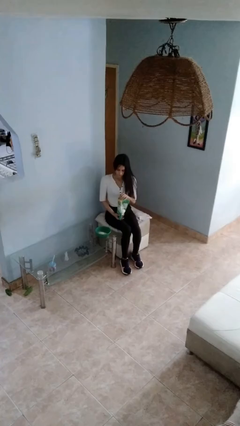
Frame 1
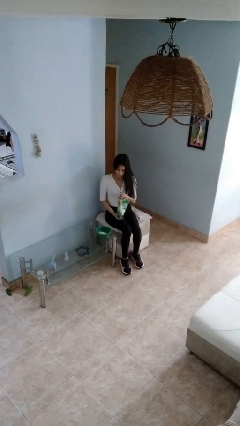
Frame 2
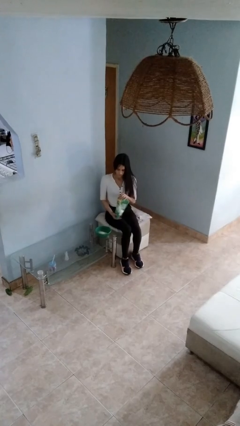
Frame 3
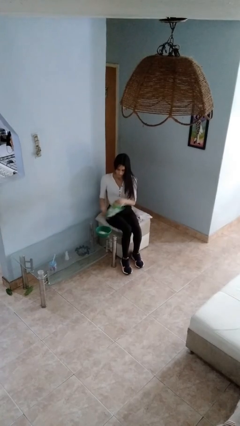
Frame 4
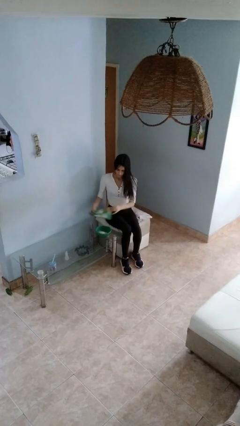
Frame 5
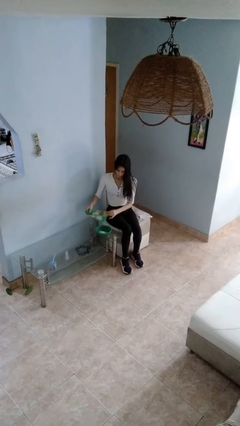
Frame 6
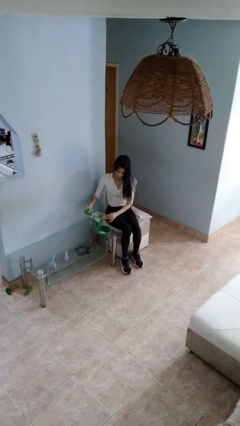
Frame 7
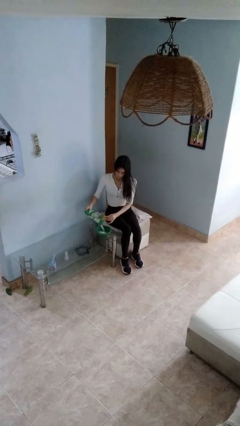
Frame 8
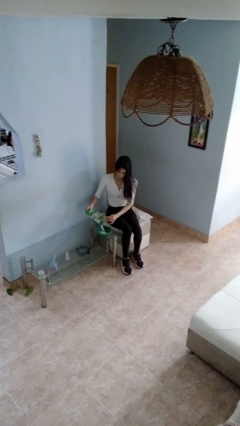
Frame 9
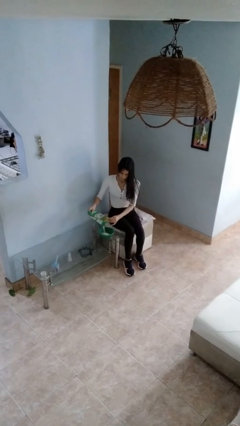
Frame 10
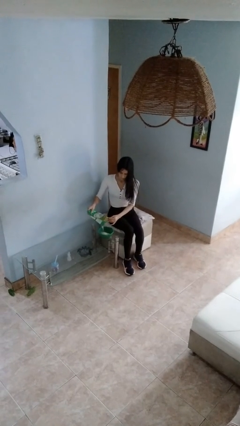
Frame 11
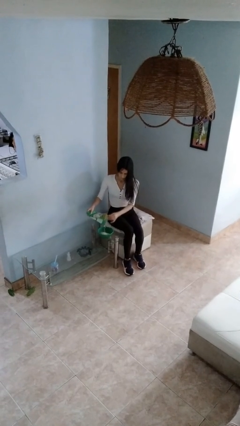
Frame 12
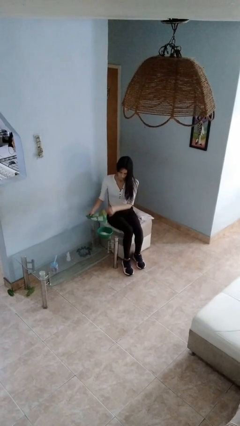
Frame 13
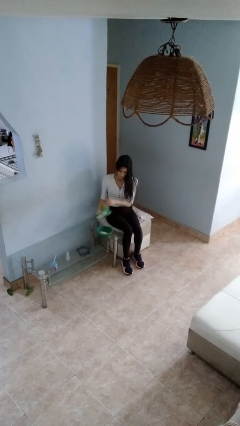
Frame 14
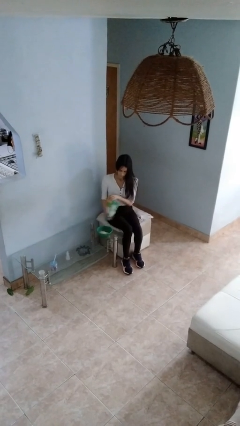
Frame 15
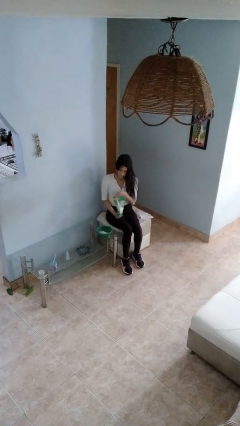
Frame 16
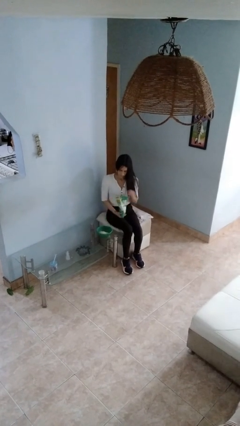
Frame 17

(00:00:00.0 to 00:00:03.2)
person pours into bowl

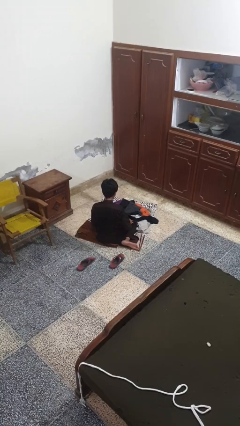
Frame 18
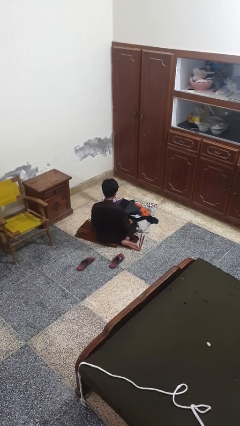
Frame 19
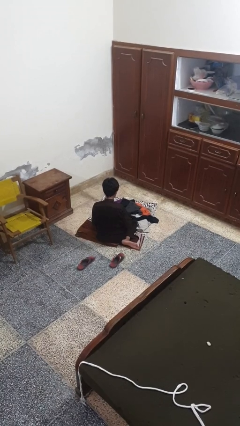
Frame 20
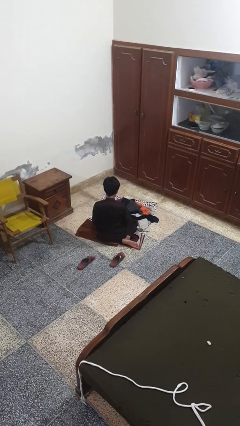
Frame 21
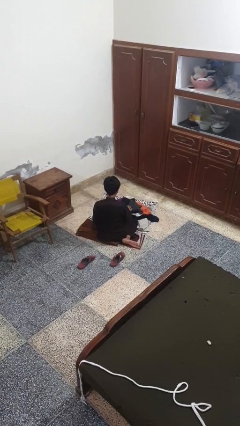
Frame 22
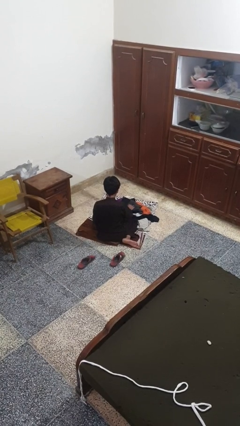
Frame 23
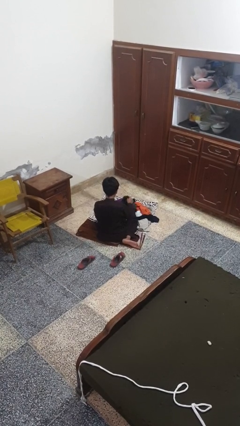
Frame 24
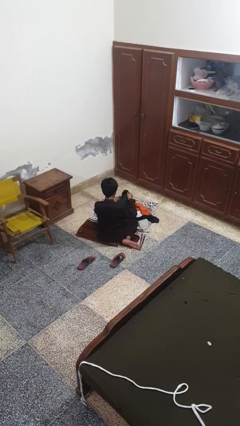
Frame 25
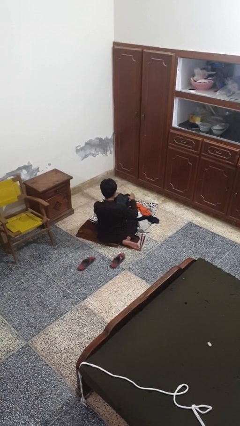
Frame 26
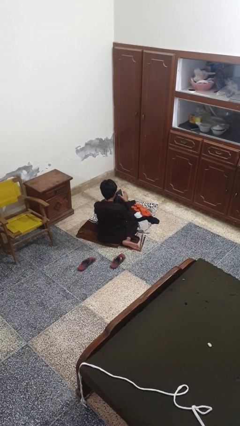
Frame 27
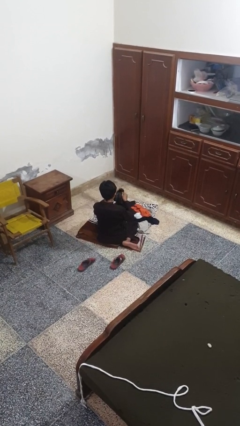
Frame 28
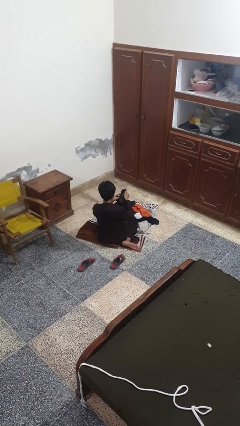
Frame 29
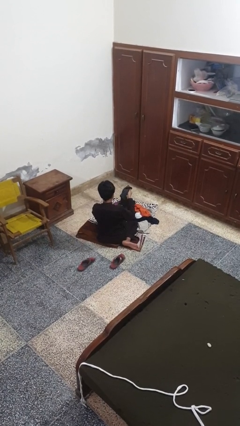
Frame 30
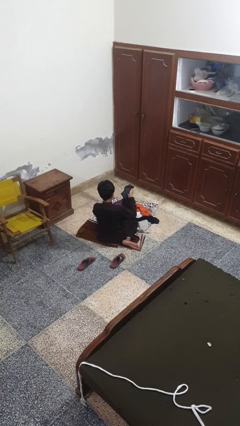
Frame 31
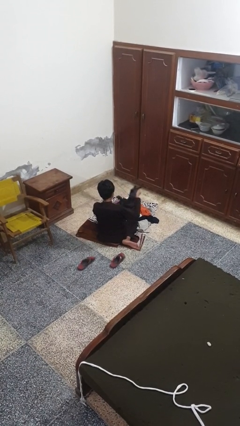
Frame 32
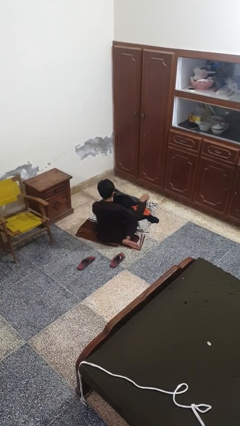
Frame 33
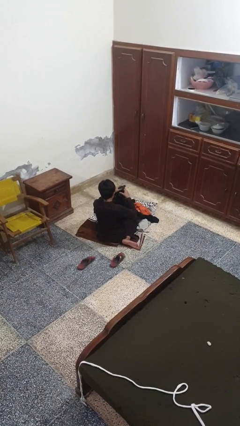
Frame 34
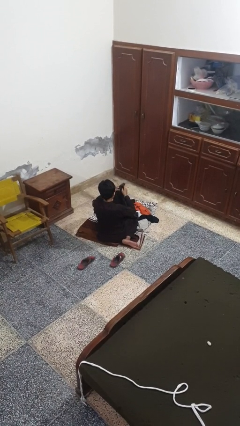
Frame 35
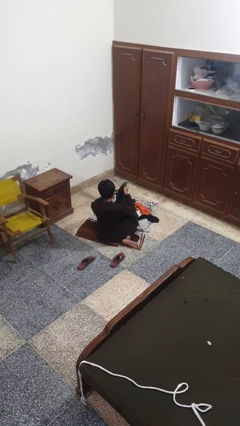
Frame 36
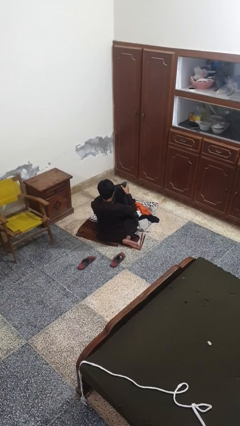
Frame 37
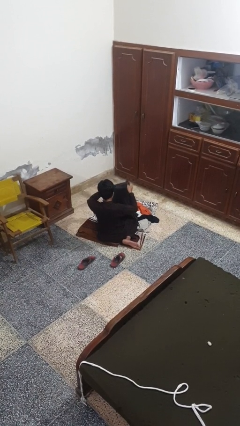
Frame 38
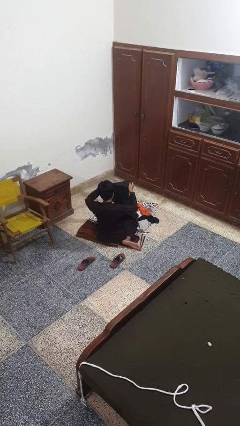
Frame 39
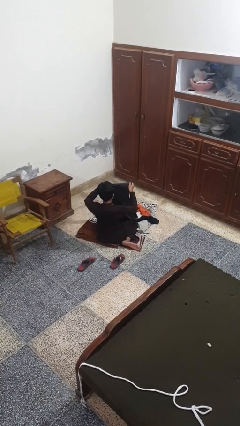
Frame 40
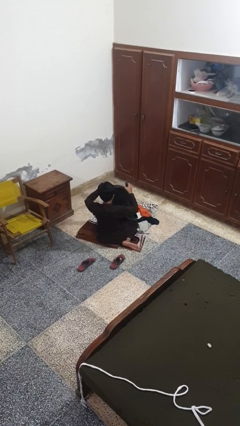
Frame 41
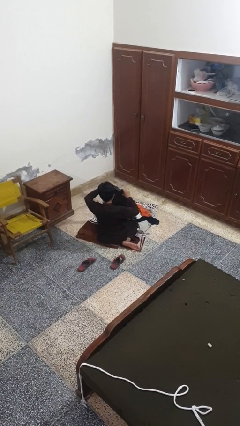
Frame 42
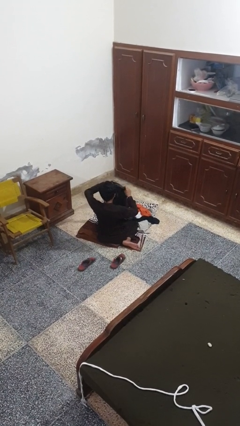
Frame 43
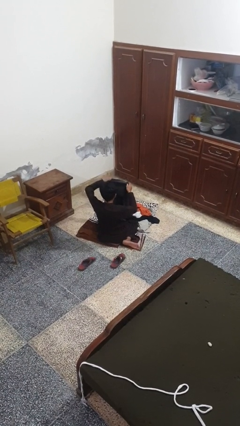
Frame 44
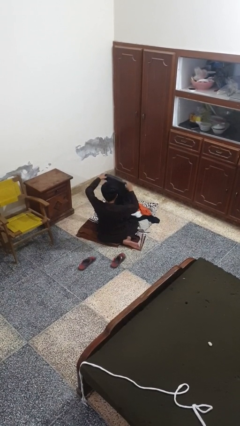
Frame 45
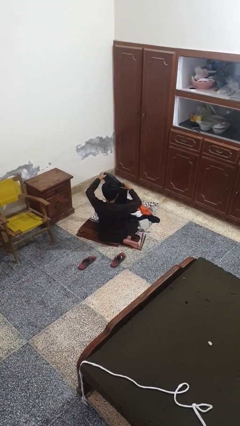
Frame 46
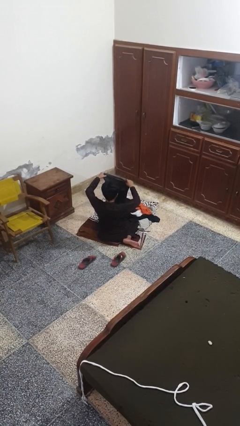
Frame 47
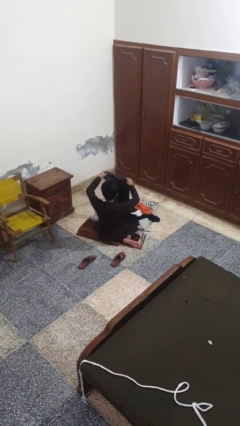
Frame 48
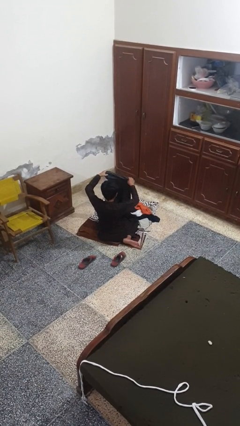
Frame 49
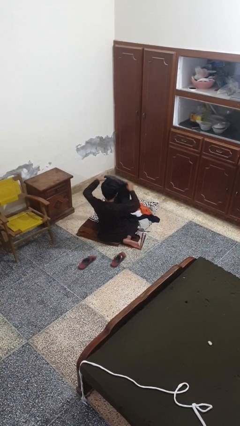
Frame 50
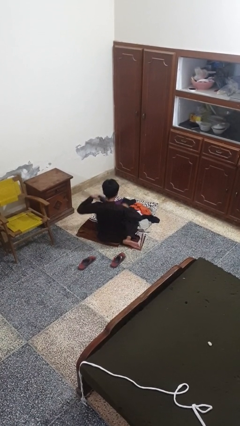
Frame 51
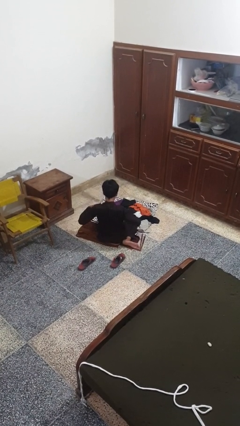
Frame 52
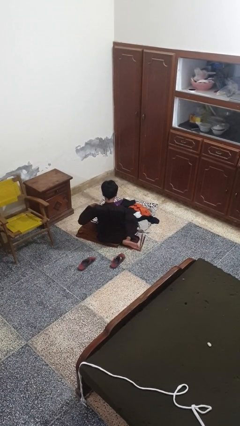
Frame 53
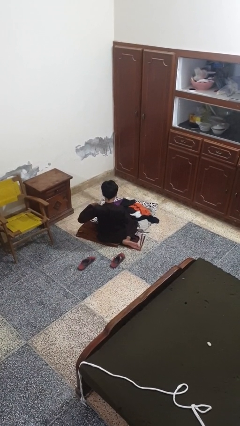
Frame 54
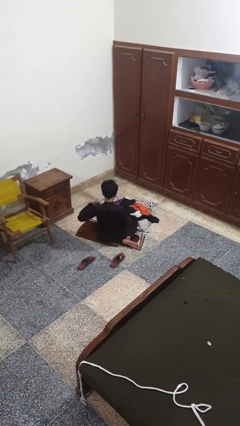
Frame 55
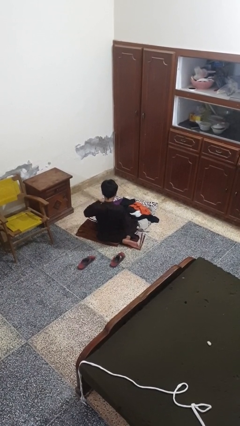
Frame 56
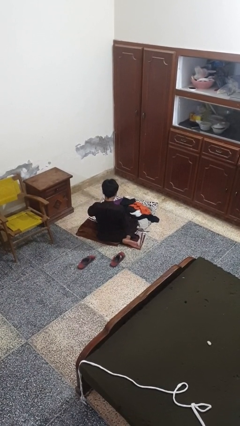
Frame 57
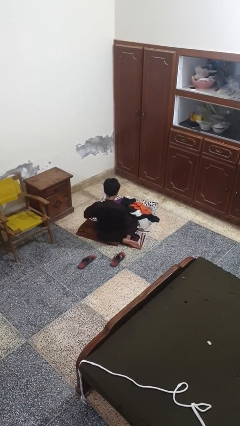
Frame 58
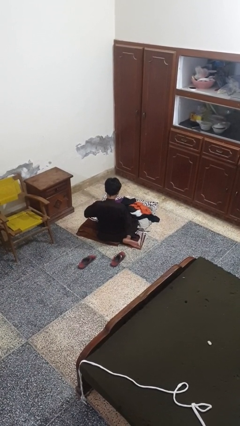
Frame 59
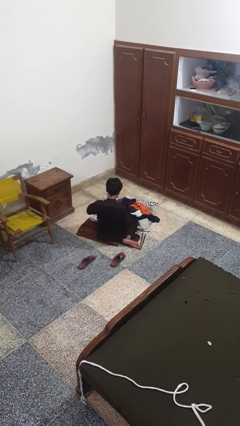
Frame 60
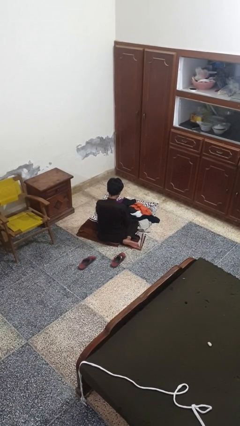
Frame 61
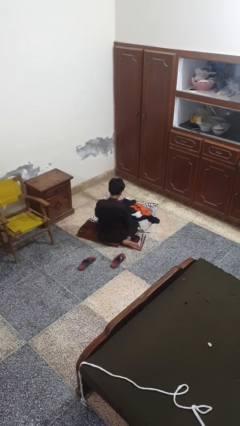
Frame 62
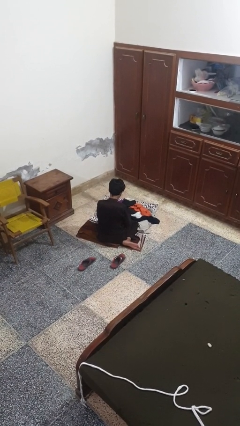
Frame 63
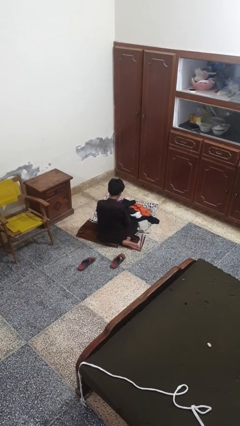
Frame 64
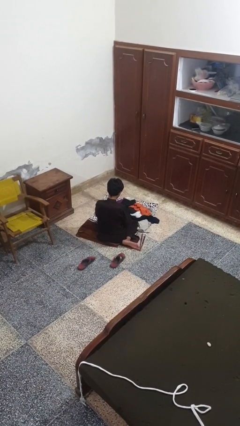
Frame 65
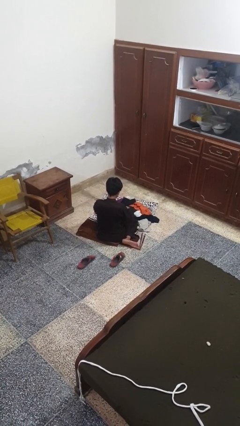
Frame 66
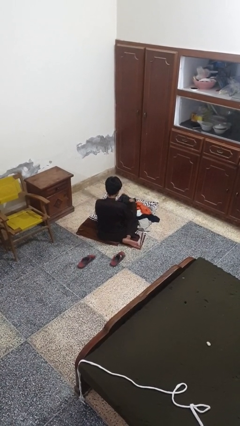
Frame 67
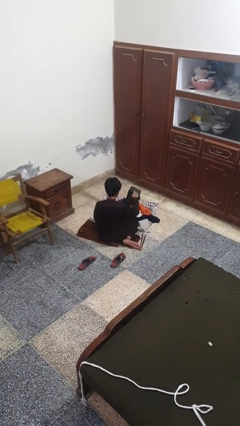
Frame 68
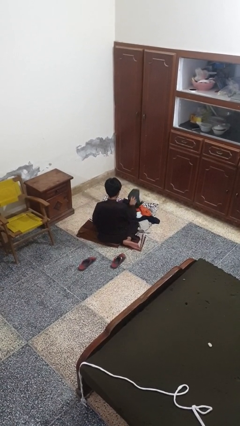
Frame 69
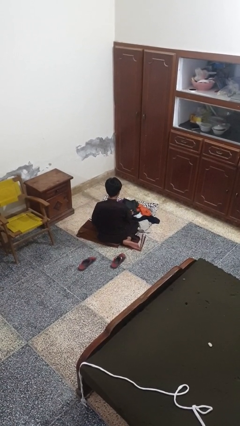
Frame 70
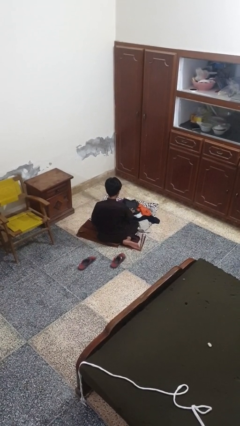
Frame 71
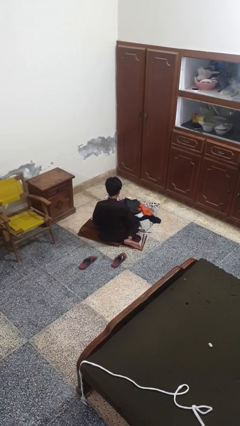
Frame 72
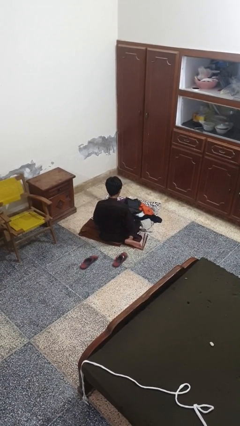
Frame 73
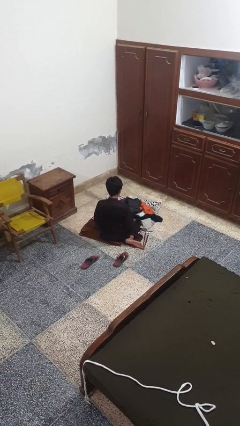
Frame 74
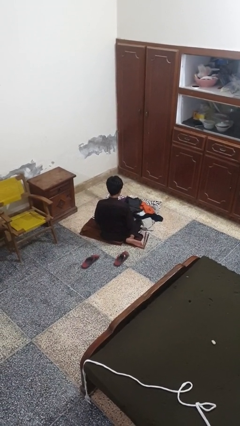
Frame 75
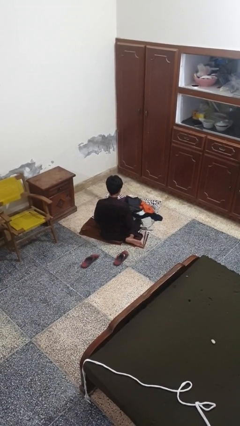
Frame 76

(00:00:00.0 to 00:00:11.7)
person folds shirt

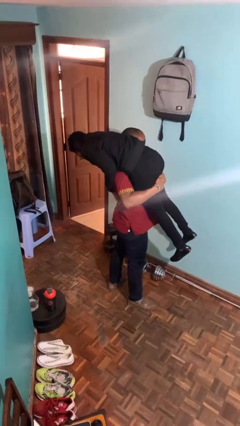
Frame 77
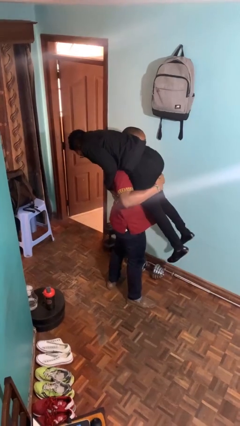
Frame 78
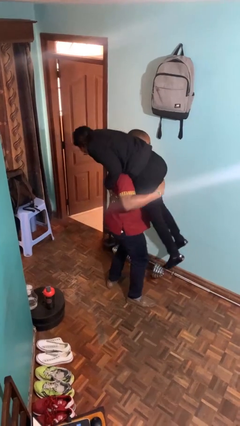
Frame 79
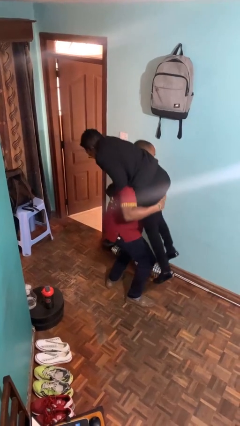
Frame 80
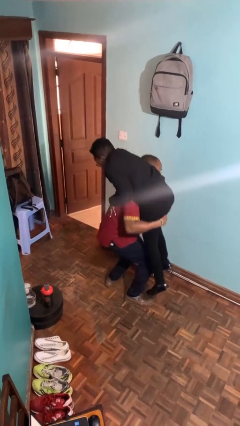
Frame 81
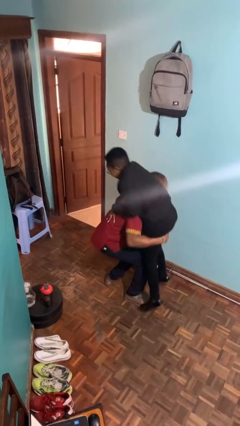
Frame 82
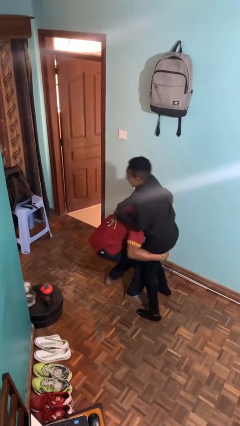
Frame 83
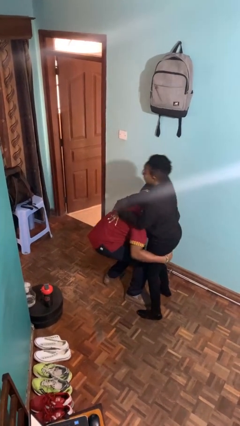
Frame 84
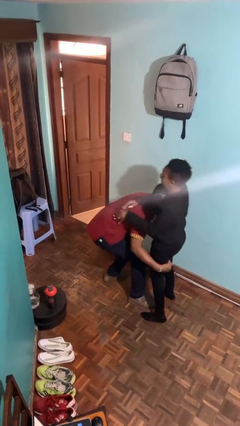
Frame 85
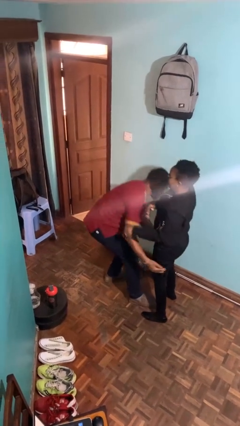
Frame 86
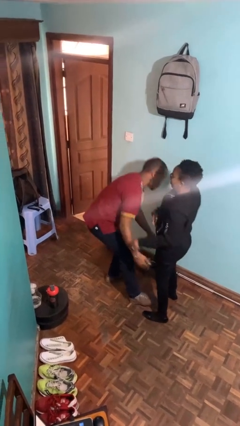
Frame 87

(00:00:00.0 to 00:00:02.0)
person puts down person

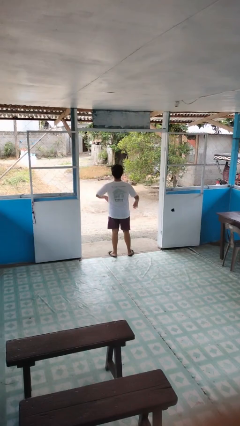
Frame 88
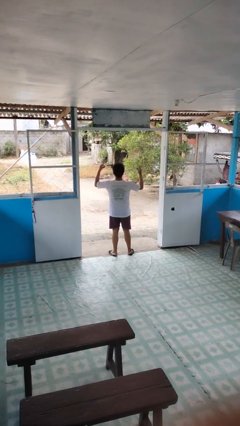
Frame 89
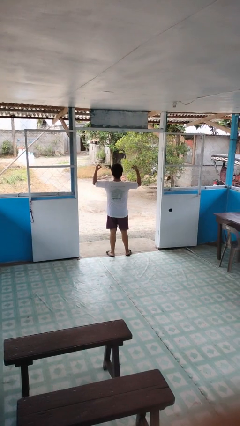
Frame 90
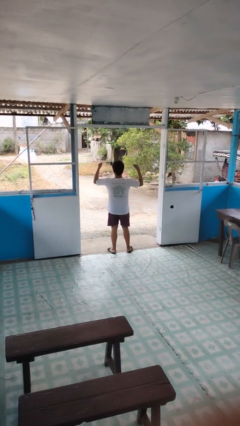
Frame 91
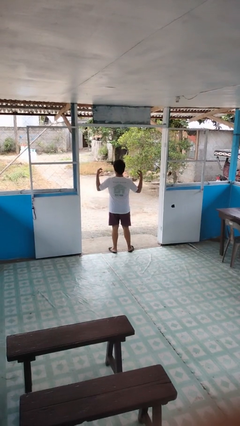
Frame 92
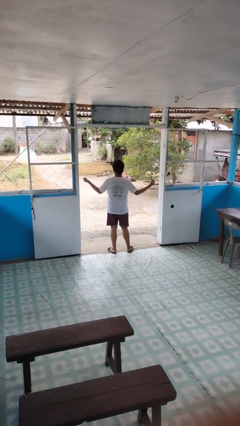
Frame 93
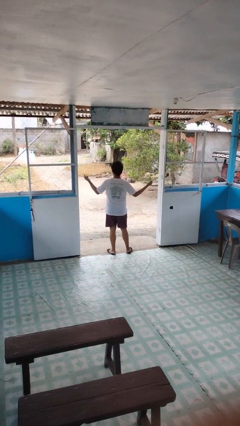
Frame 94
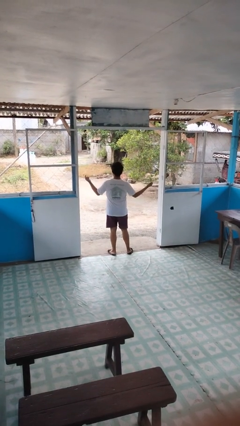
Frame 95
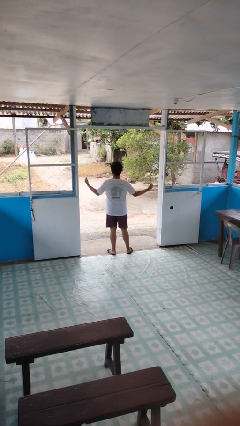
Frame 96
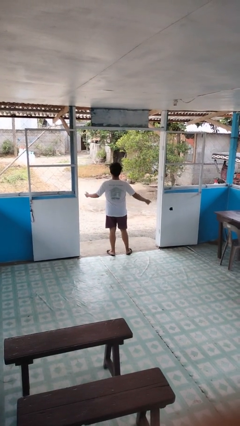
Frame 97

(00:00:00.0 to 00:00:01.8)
person snaps fingers
